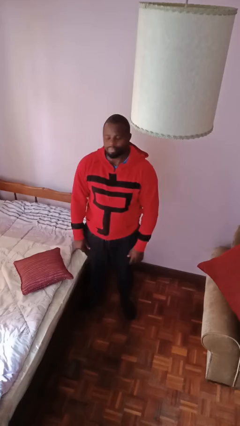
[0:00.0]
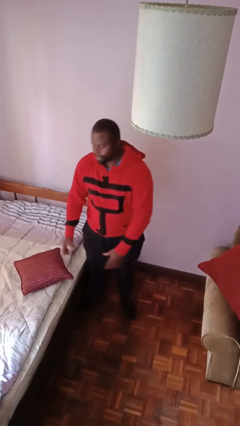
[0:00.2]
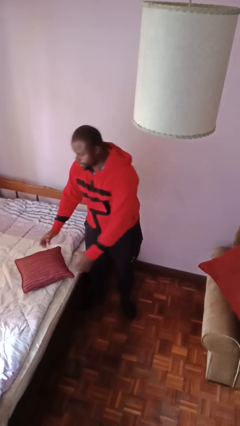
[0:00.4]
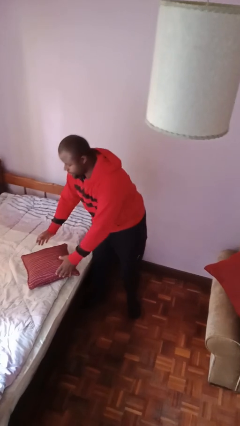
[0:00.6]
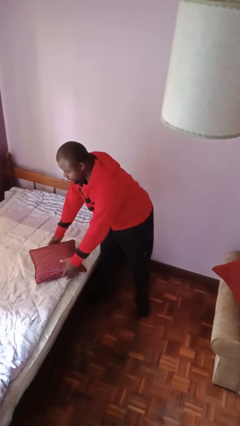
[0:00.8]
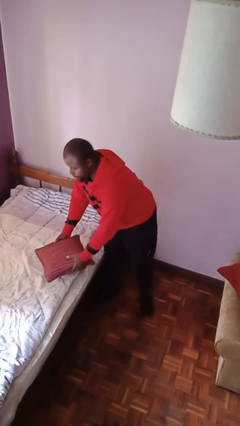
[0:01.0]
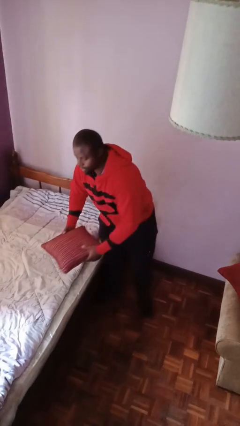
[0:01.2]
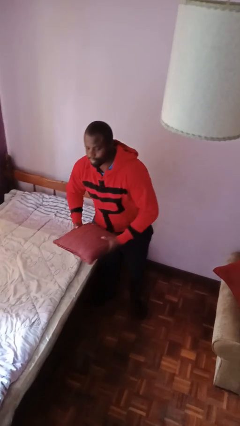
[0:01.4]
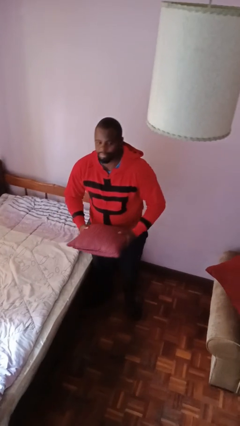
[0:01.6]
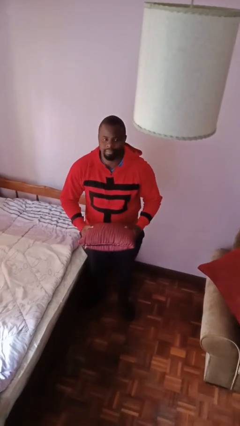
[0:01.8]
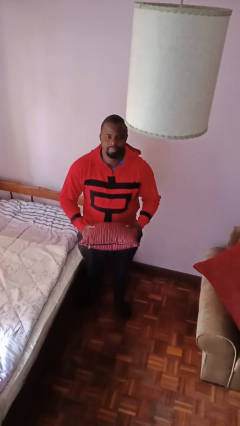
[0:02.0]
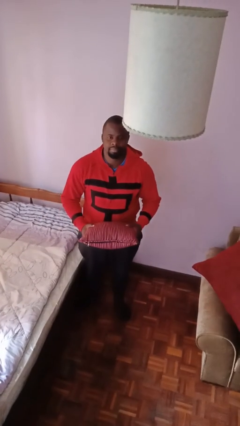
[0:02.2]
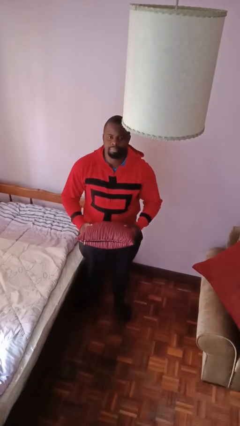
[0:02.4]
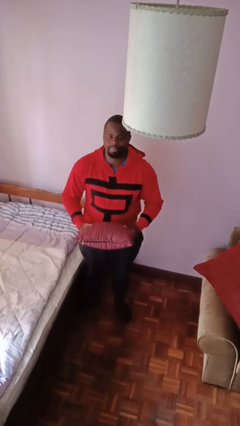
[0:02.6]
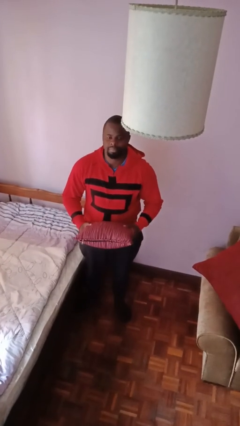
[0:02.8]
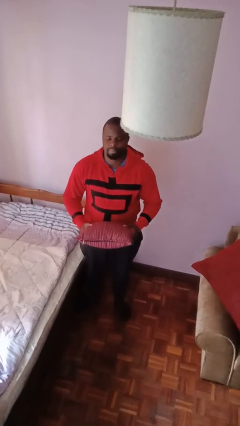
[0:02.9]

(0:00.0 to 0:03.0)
person picks up object from bed

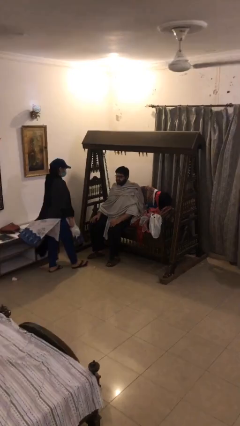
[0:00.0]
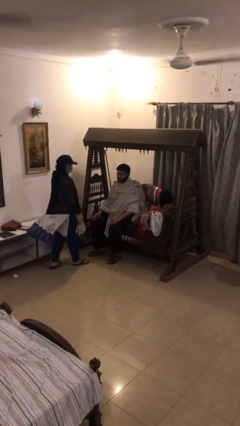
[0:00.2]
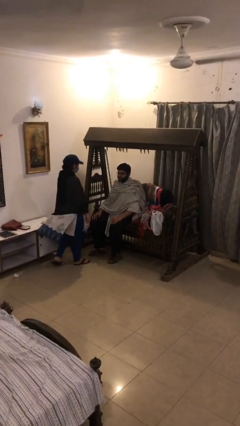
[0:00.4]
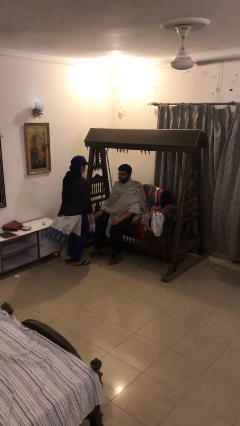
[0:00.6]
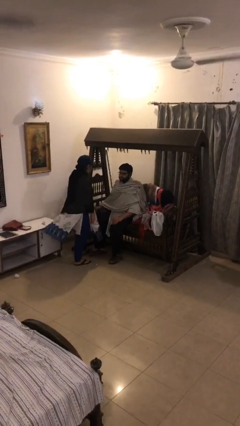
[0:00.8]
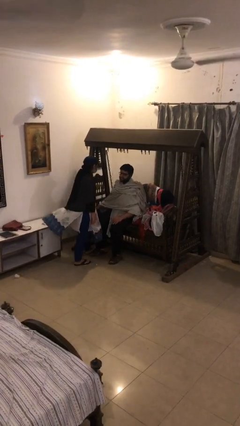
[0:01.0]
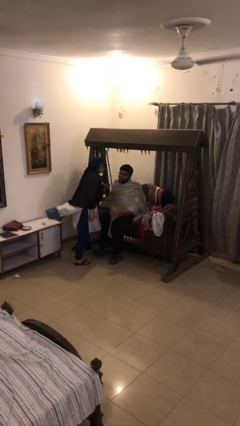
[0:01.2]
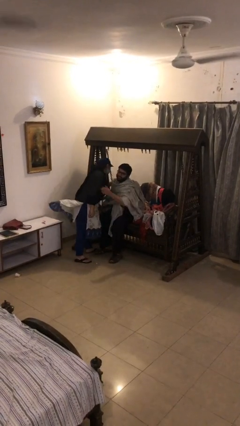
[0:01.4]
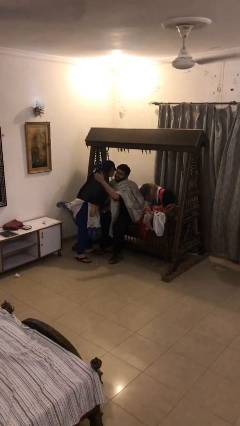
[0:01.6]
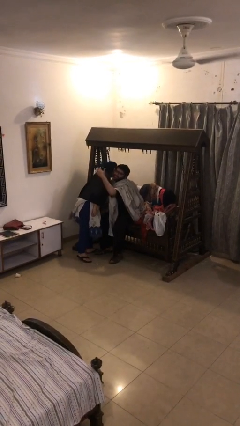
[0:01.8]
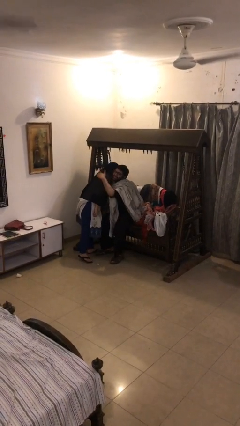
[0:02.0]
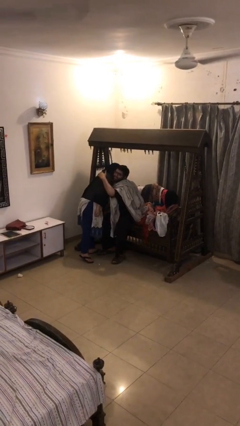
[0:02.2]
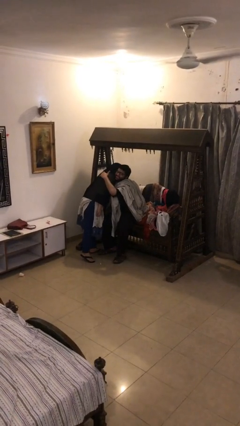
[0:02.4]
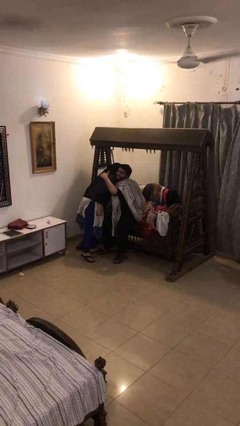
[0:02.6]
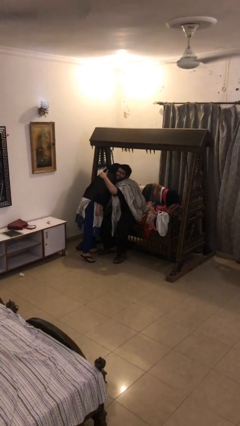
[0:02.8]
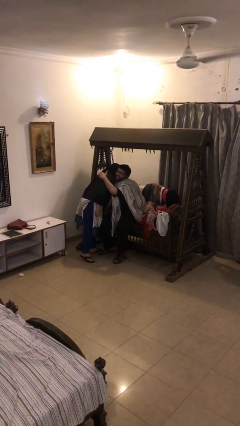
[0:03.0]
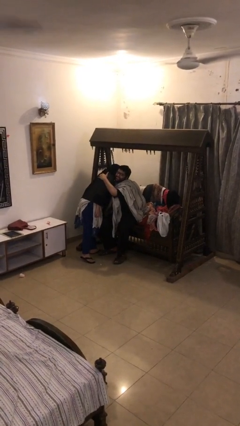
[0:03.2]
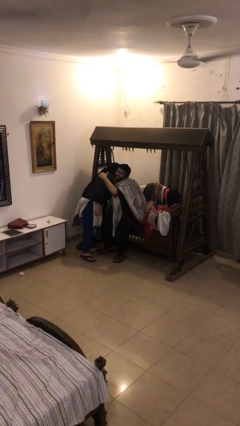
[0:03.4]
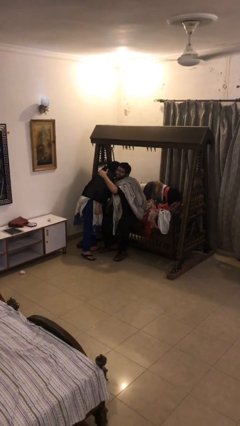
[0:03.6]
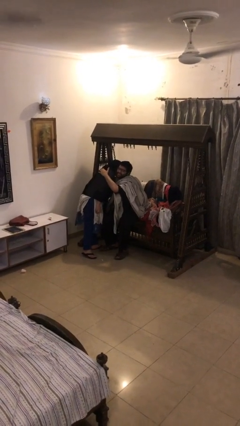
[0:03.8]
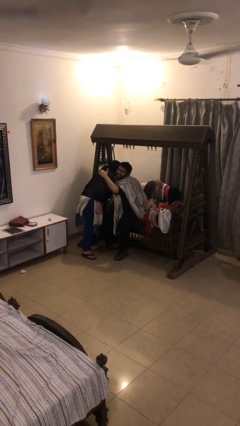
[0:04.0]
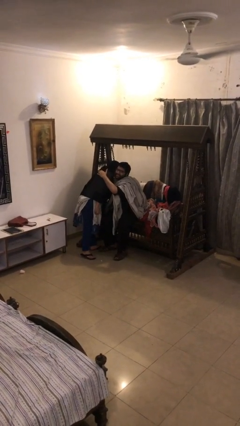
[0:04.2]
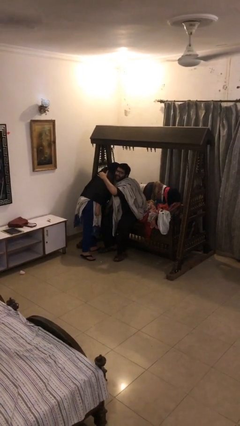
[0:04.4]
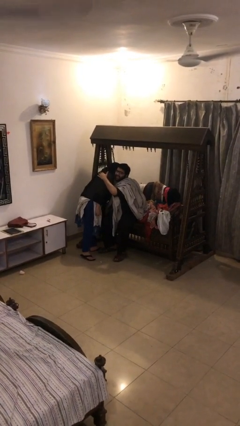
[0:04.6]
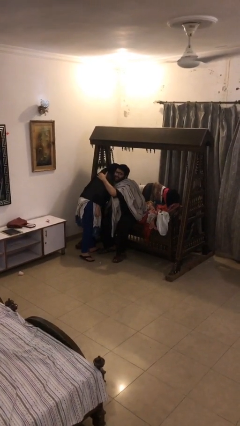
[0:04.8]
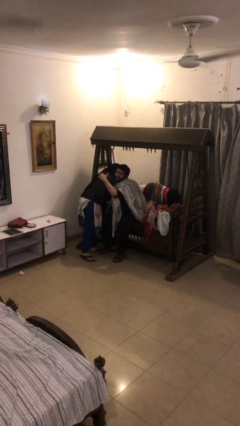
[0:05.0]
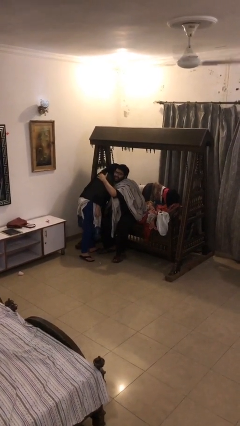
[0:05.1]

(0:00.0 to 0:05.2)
person embraces person

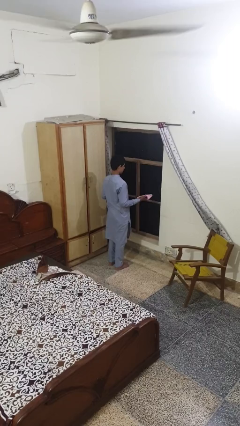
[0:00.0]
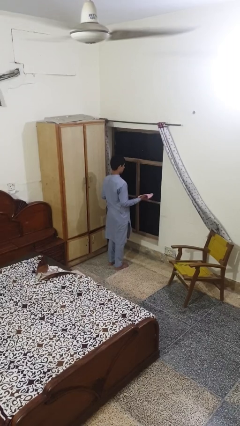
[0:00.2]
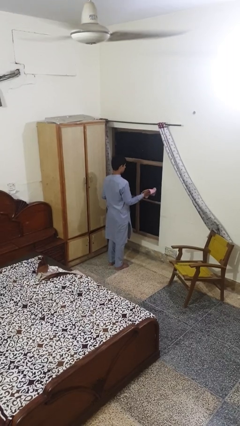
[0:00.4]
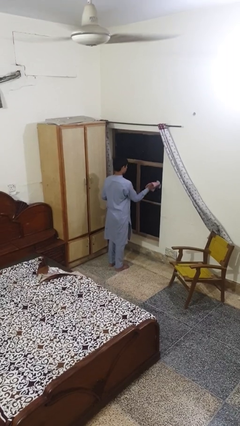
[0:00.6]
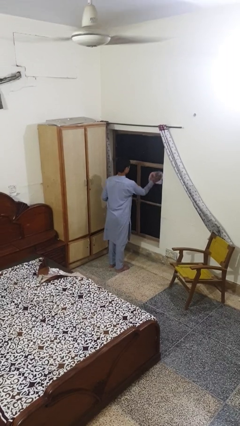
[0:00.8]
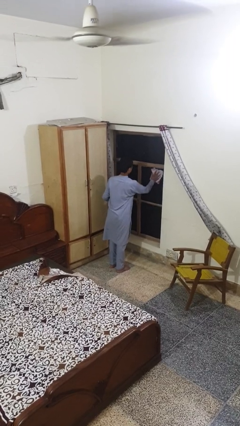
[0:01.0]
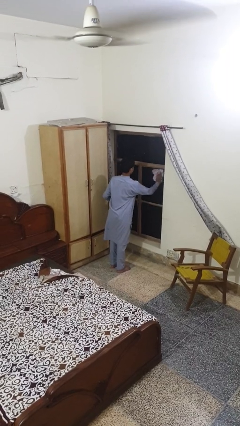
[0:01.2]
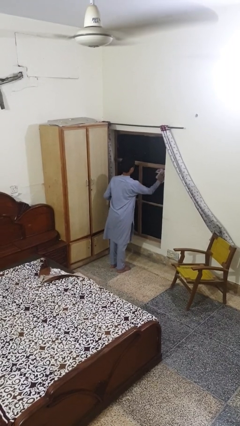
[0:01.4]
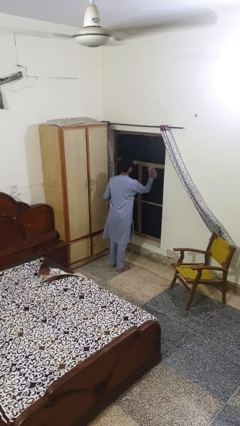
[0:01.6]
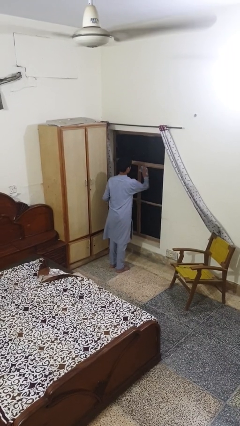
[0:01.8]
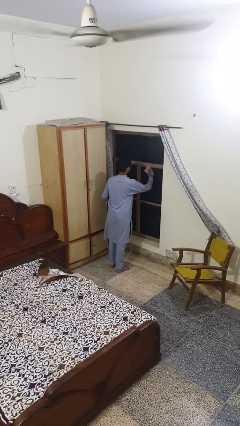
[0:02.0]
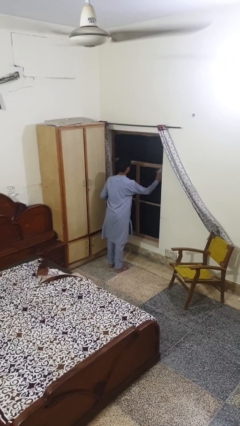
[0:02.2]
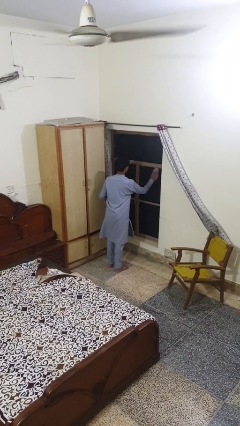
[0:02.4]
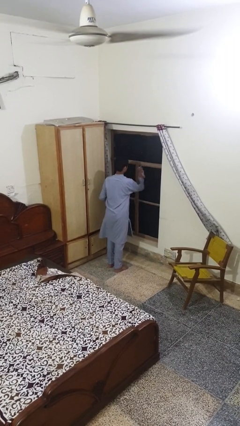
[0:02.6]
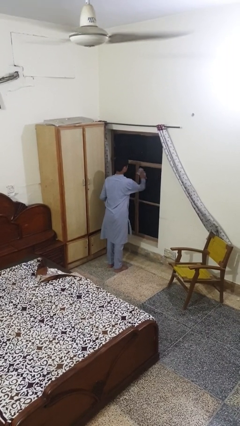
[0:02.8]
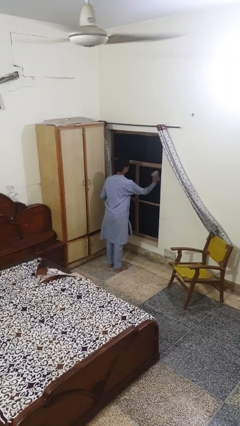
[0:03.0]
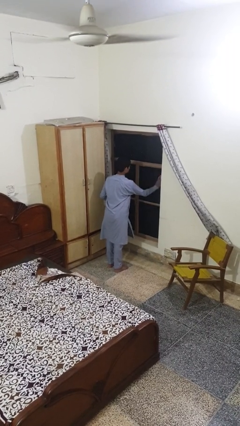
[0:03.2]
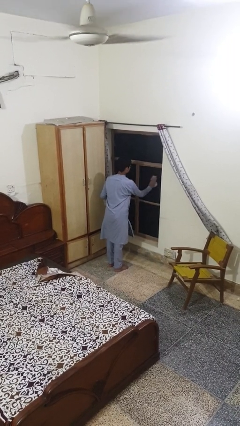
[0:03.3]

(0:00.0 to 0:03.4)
person washes window

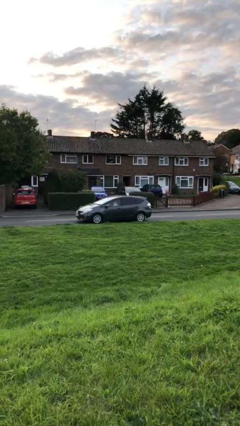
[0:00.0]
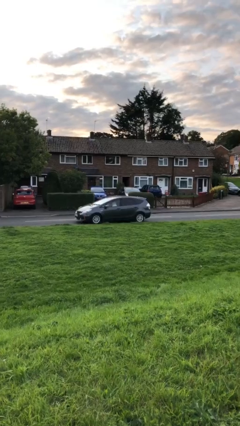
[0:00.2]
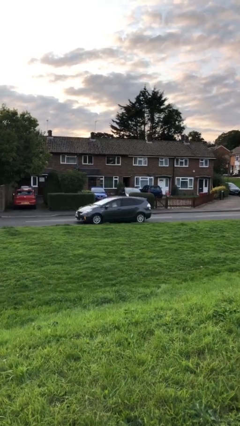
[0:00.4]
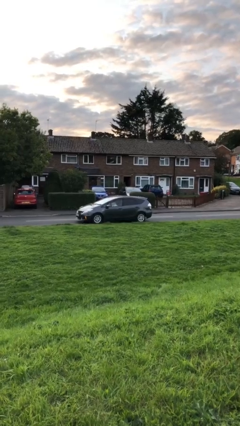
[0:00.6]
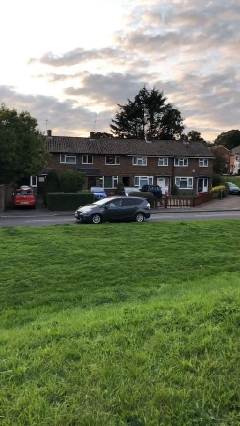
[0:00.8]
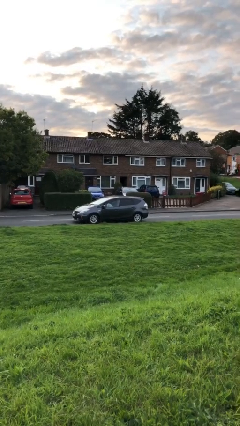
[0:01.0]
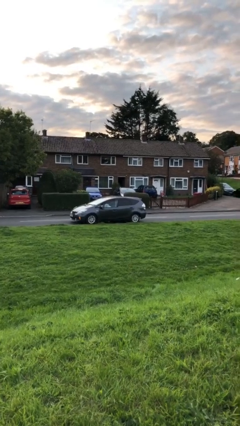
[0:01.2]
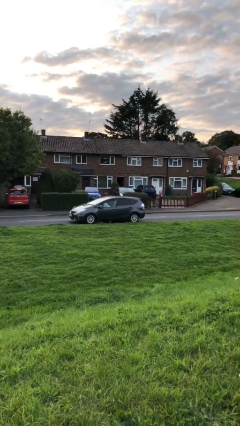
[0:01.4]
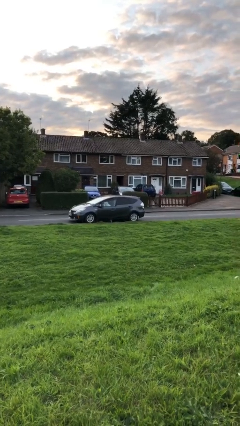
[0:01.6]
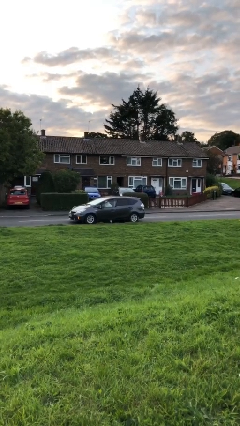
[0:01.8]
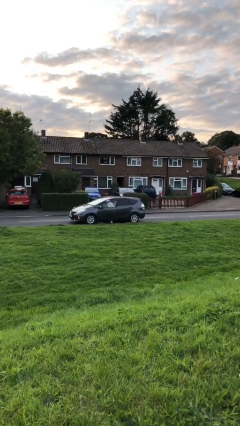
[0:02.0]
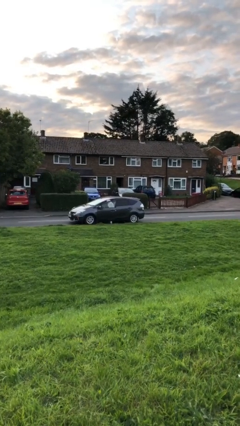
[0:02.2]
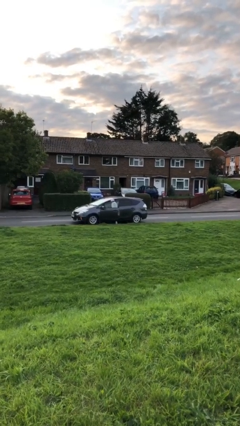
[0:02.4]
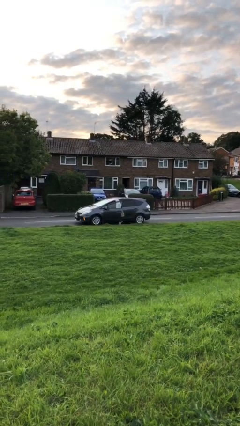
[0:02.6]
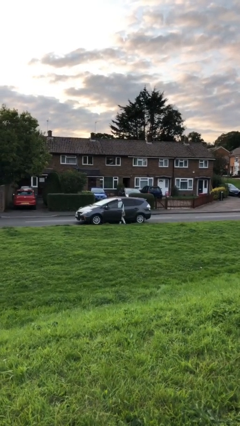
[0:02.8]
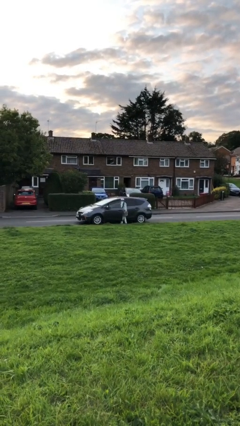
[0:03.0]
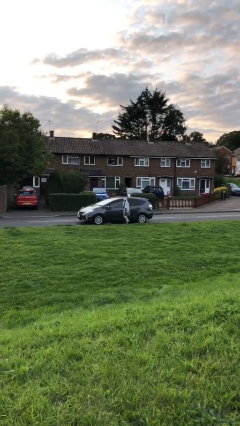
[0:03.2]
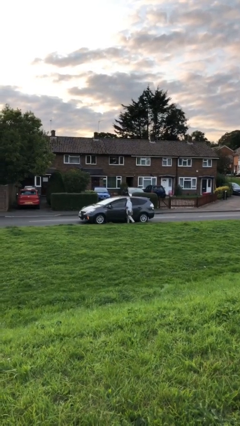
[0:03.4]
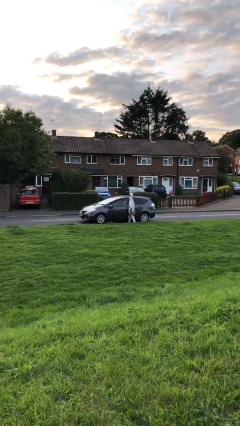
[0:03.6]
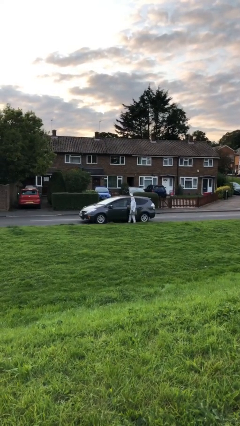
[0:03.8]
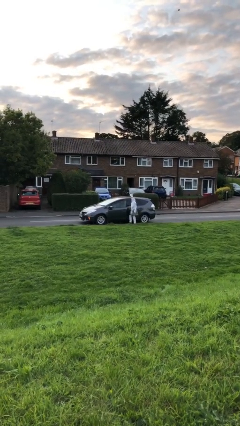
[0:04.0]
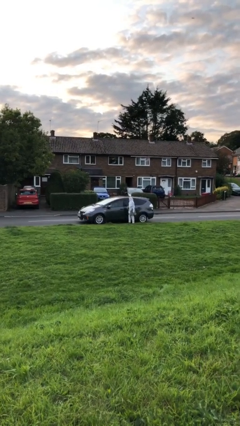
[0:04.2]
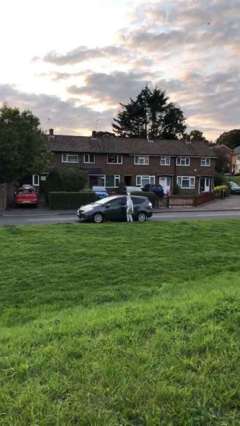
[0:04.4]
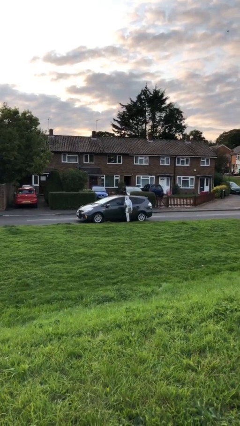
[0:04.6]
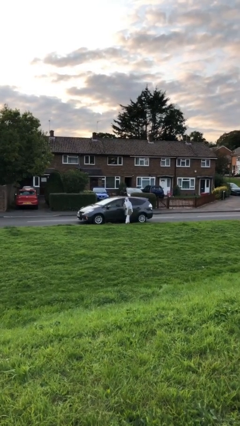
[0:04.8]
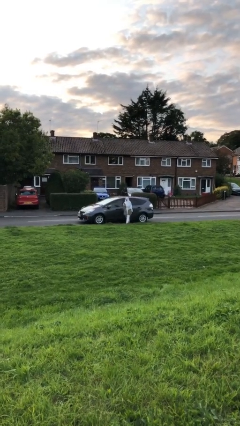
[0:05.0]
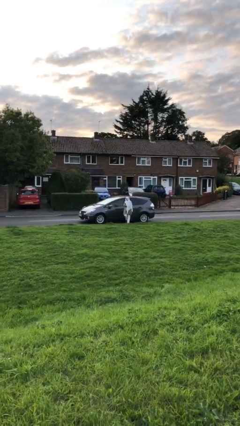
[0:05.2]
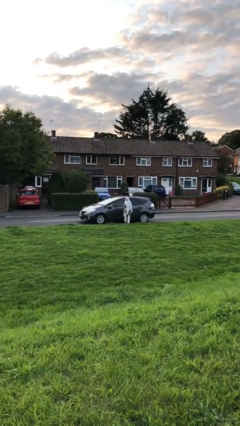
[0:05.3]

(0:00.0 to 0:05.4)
car drops off person

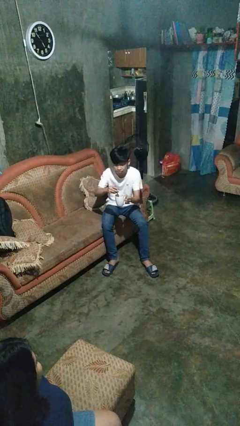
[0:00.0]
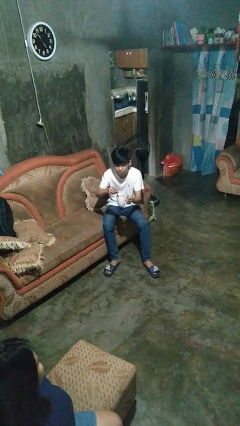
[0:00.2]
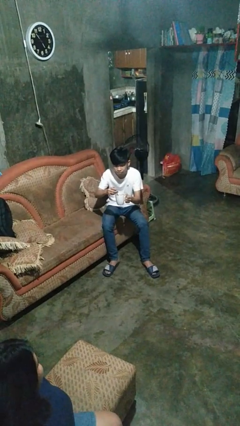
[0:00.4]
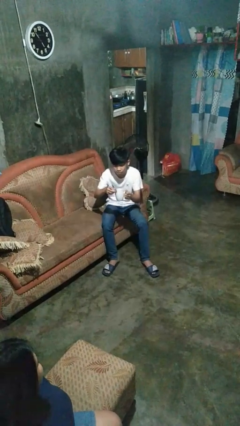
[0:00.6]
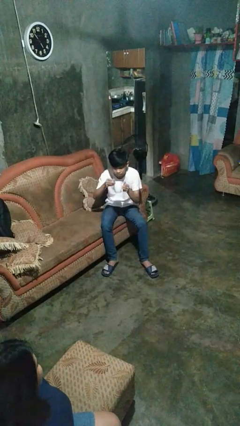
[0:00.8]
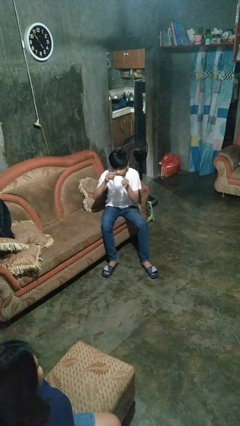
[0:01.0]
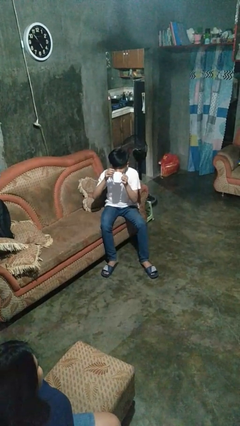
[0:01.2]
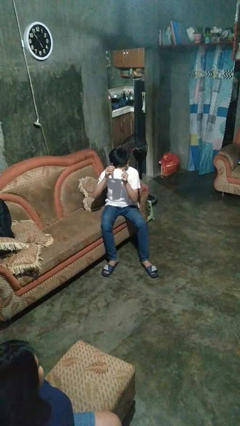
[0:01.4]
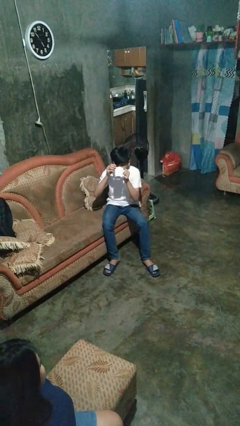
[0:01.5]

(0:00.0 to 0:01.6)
person drinks from mug
